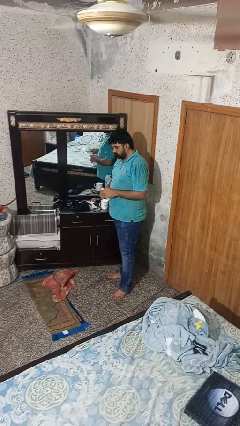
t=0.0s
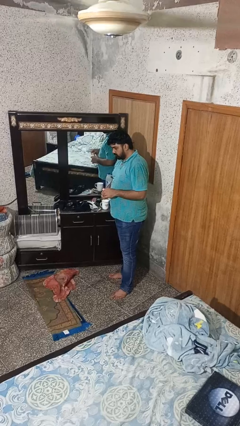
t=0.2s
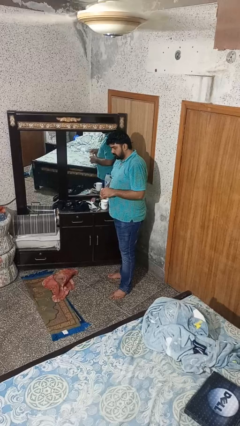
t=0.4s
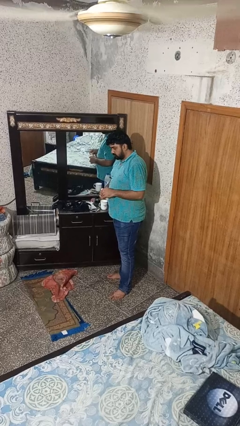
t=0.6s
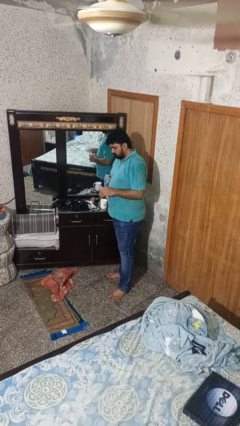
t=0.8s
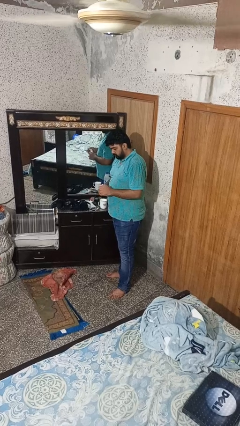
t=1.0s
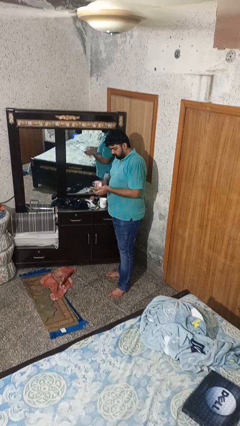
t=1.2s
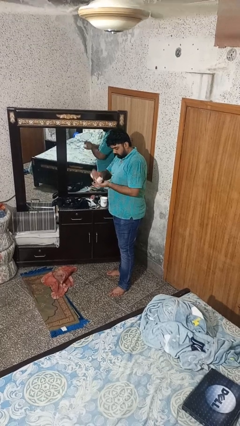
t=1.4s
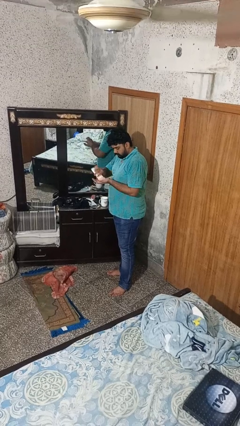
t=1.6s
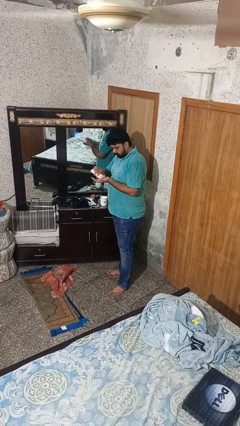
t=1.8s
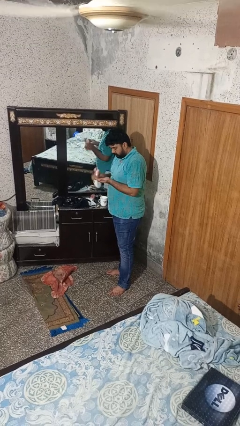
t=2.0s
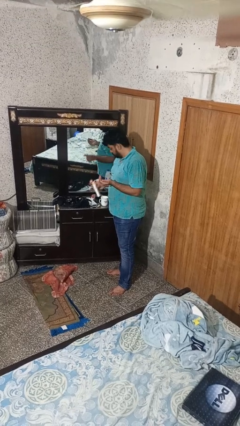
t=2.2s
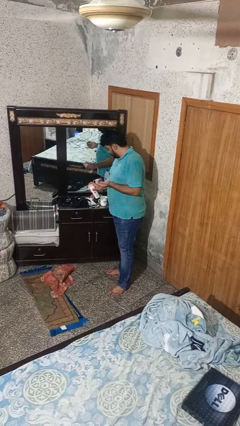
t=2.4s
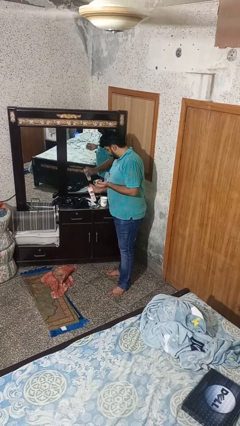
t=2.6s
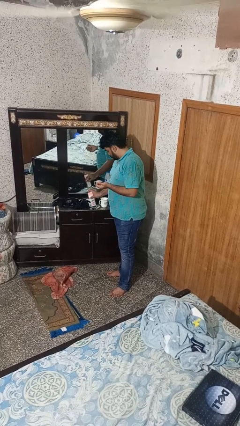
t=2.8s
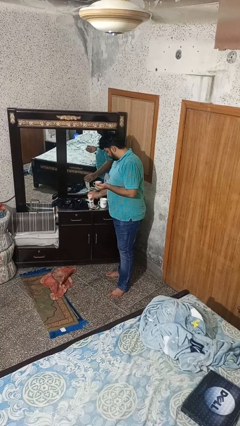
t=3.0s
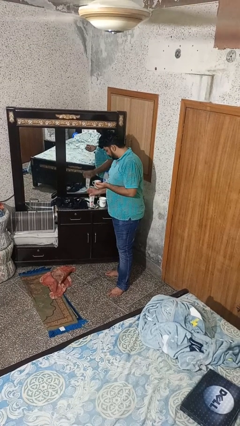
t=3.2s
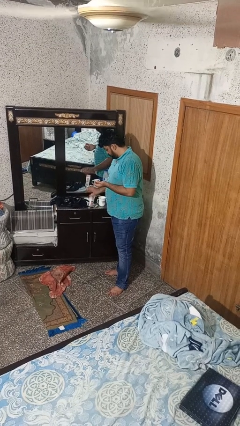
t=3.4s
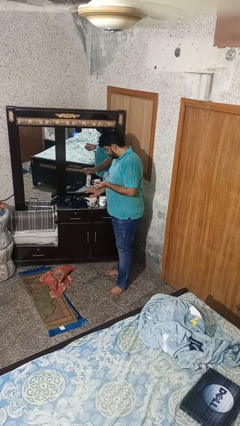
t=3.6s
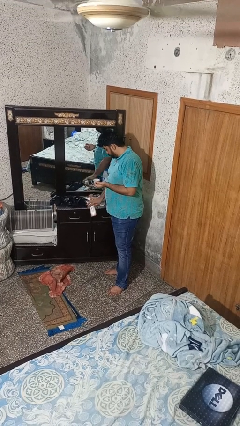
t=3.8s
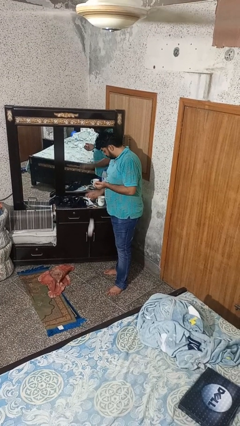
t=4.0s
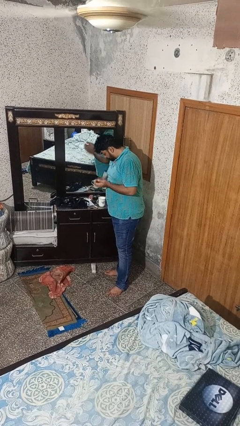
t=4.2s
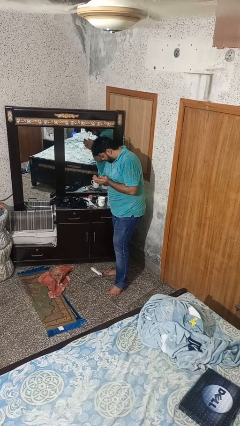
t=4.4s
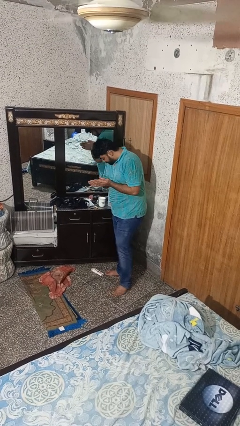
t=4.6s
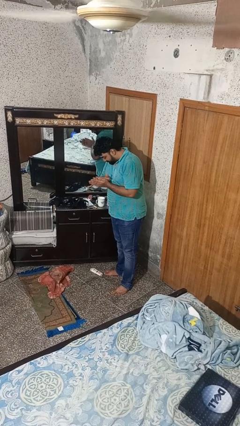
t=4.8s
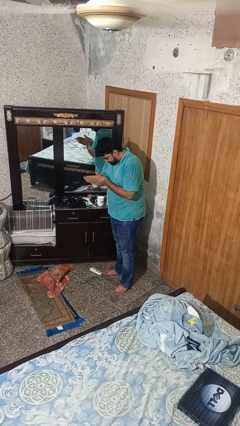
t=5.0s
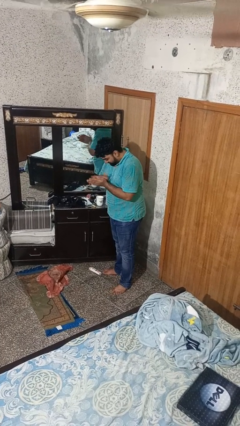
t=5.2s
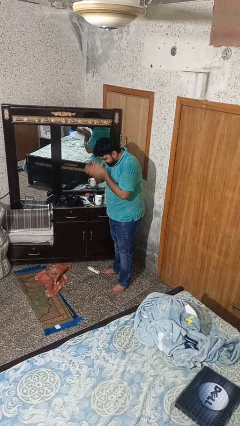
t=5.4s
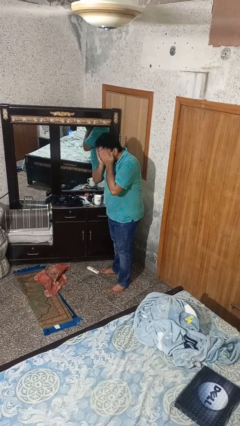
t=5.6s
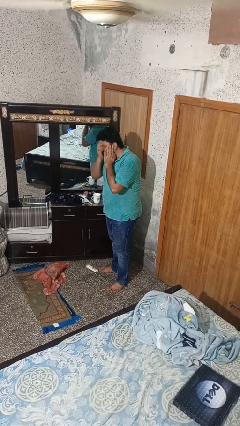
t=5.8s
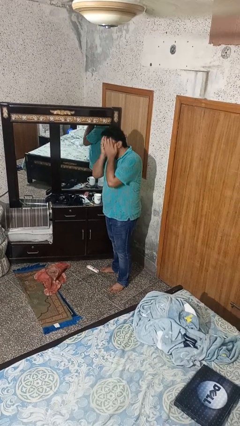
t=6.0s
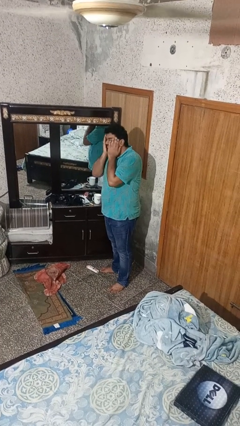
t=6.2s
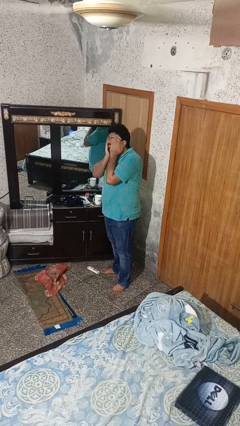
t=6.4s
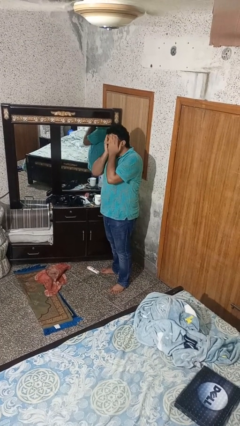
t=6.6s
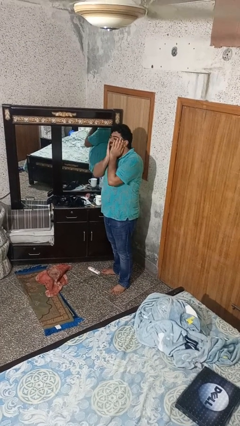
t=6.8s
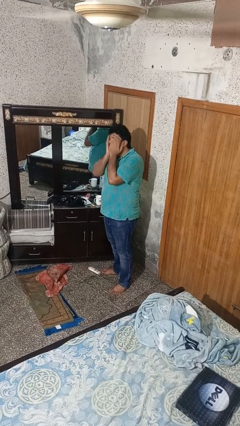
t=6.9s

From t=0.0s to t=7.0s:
person applies facial moisturizer

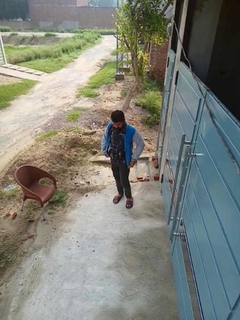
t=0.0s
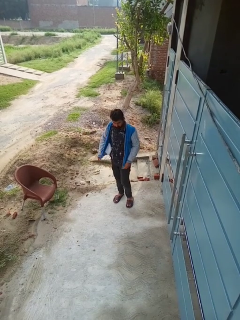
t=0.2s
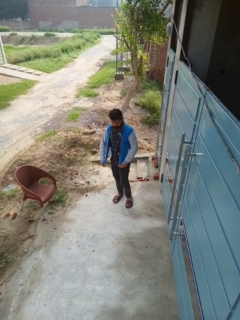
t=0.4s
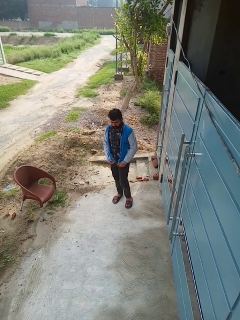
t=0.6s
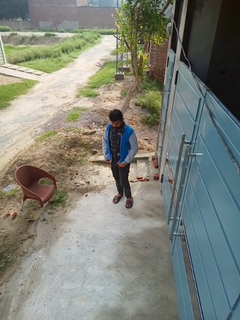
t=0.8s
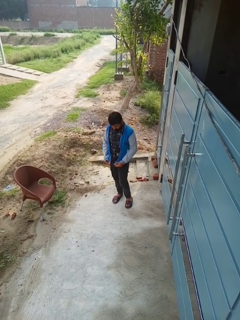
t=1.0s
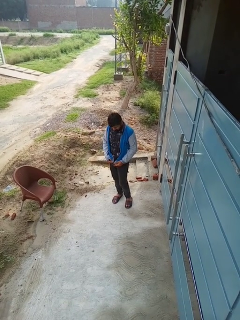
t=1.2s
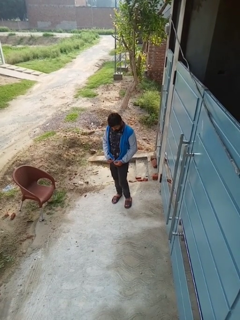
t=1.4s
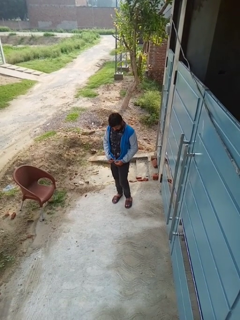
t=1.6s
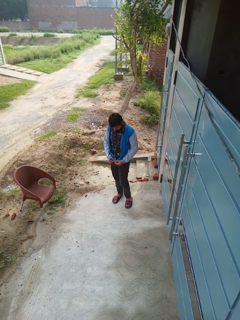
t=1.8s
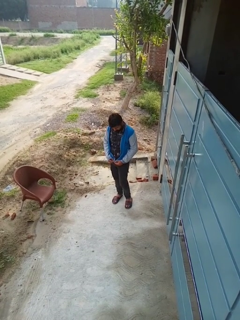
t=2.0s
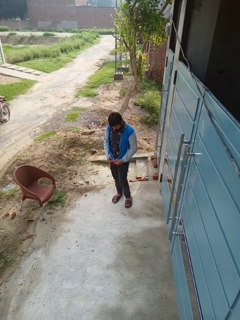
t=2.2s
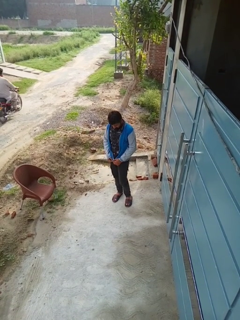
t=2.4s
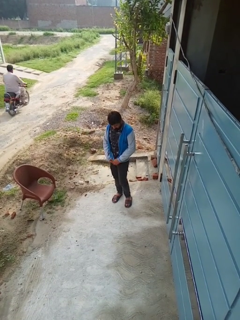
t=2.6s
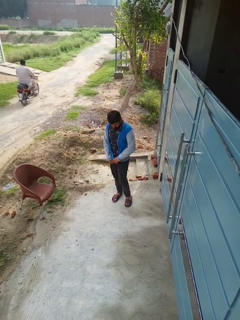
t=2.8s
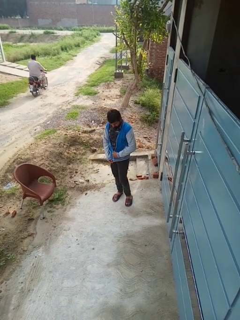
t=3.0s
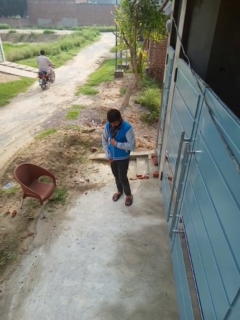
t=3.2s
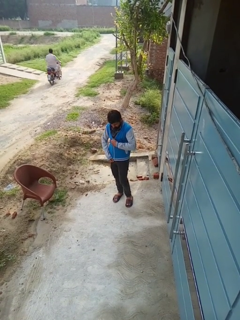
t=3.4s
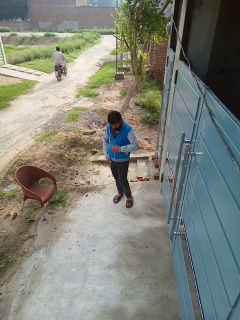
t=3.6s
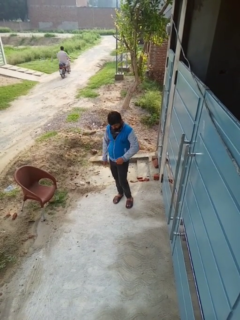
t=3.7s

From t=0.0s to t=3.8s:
person zips up jacket

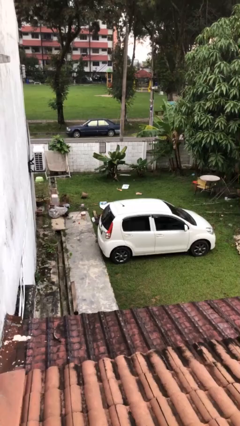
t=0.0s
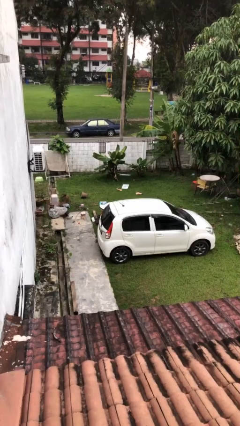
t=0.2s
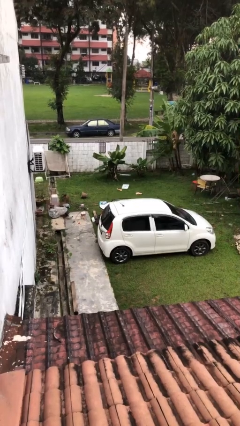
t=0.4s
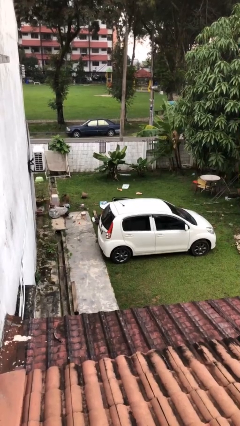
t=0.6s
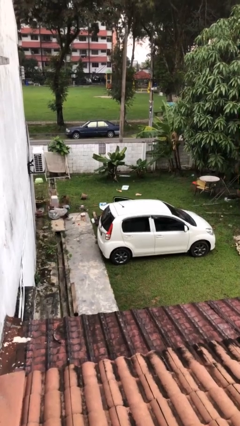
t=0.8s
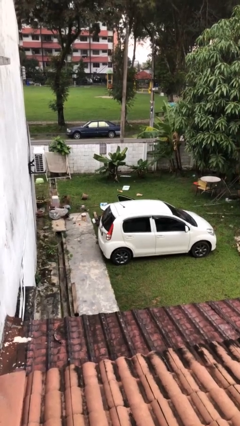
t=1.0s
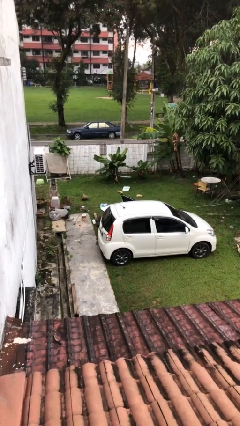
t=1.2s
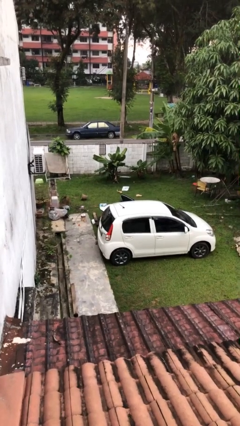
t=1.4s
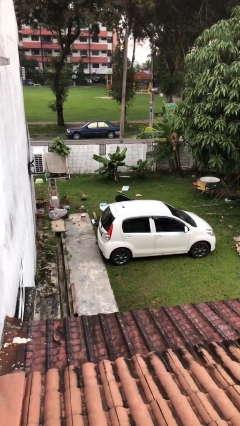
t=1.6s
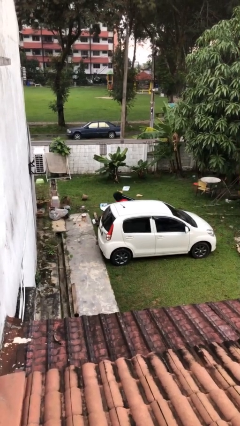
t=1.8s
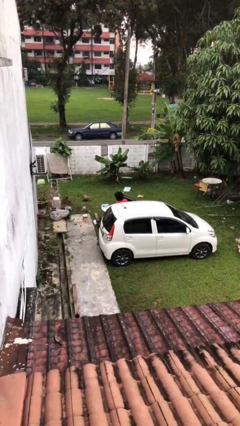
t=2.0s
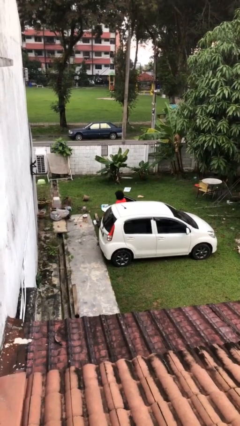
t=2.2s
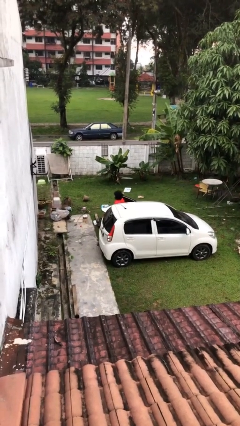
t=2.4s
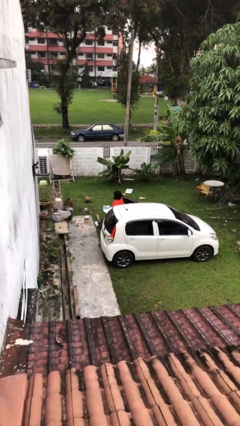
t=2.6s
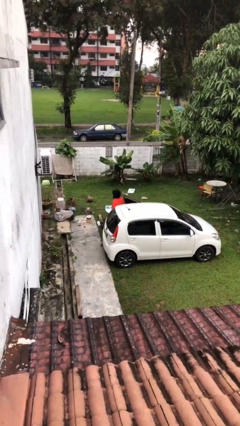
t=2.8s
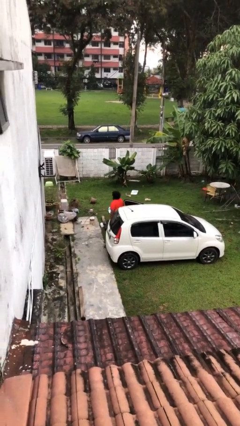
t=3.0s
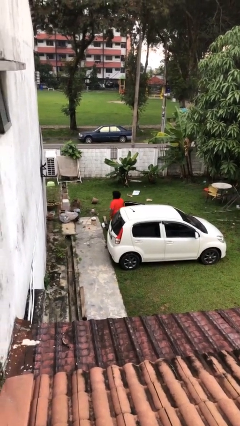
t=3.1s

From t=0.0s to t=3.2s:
car drops off person

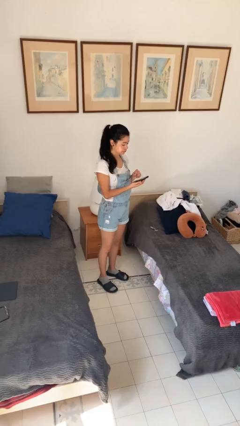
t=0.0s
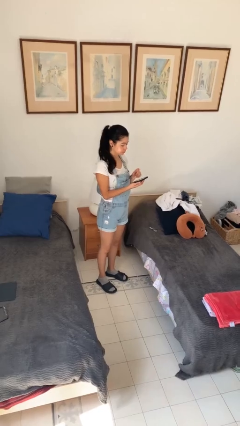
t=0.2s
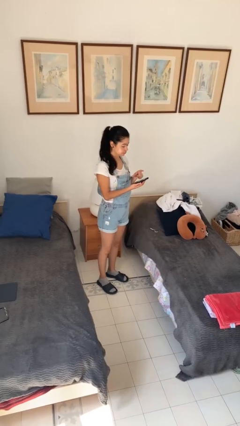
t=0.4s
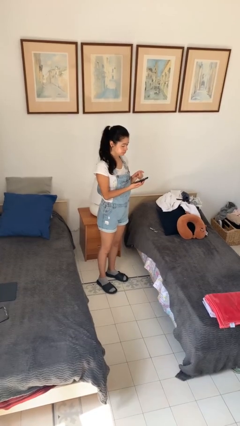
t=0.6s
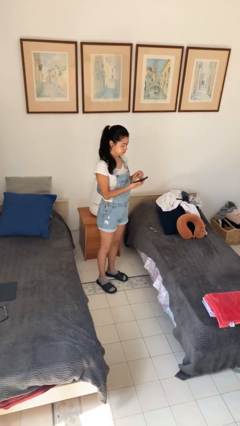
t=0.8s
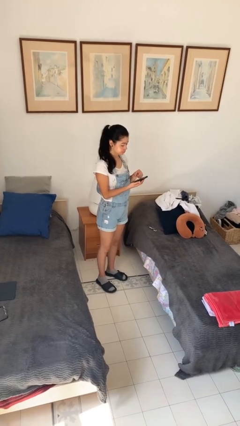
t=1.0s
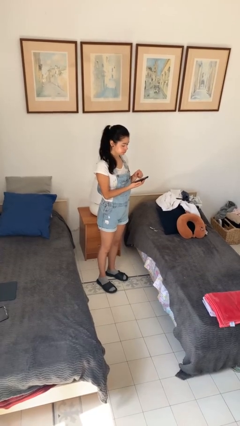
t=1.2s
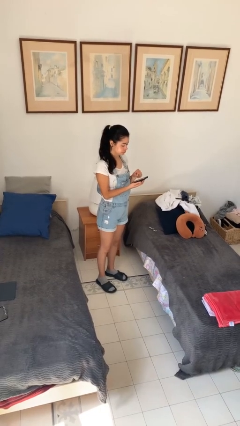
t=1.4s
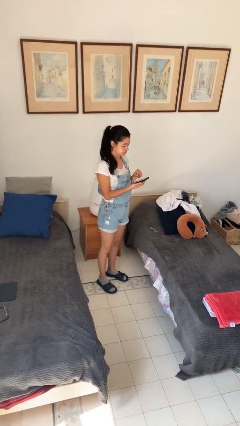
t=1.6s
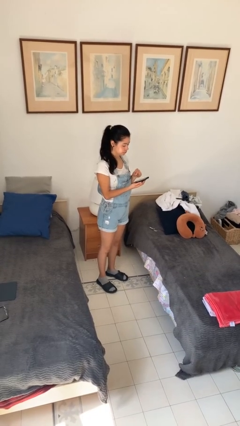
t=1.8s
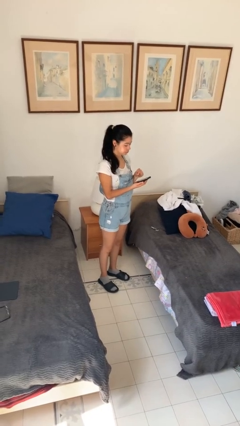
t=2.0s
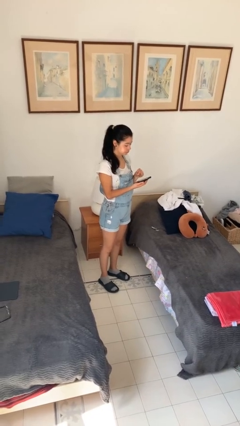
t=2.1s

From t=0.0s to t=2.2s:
person gestures zoom in

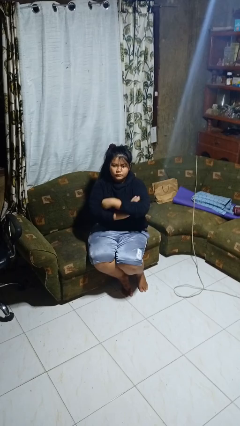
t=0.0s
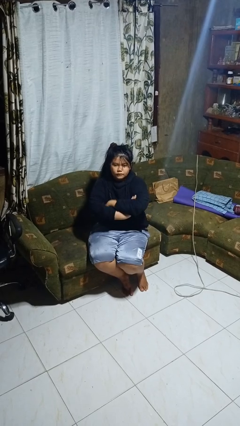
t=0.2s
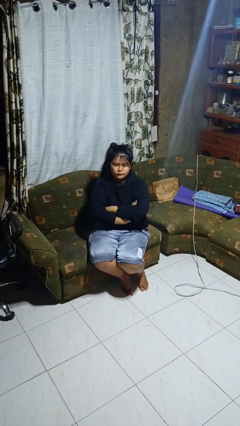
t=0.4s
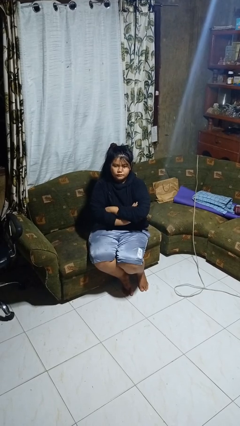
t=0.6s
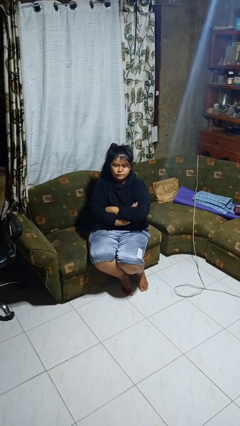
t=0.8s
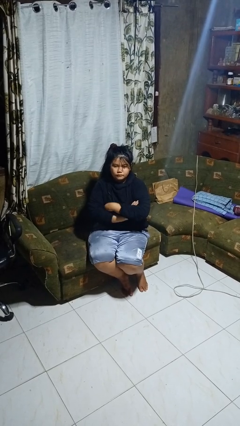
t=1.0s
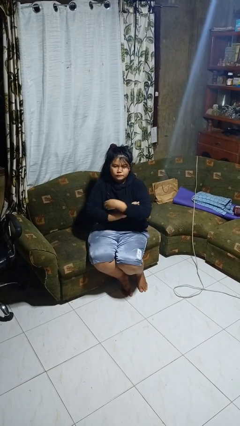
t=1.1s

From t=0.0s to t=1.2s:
person crosses arms

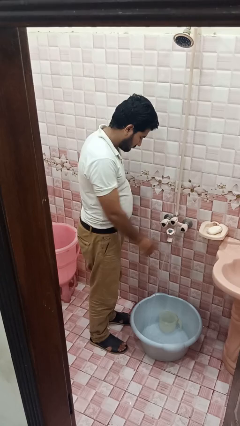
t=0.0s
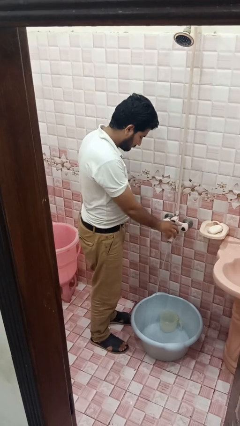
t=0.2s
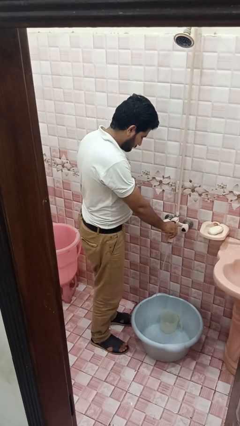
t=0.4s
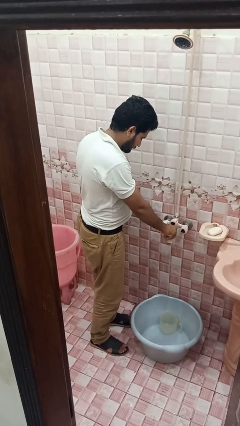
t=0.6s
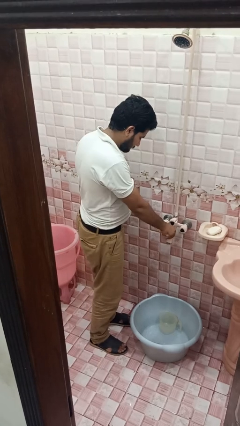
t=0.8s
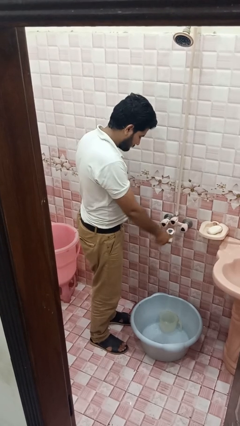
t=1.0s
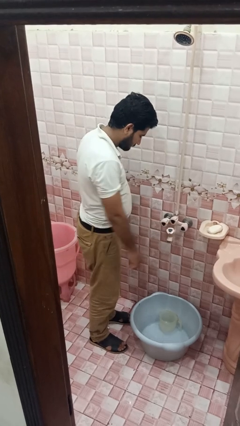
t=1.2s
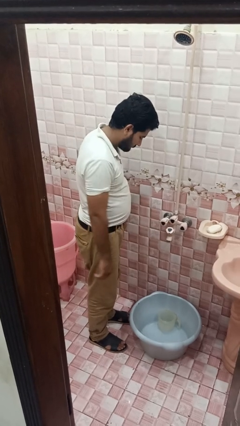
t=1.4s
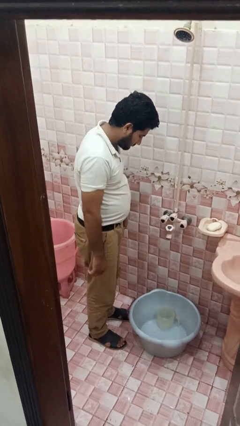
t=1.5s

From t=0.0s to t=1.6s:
person turns off faucet
